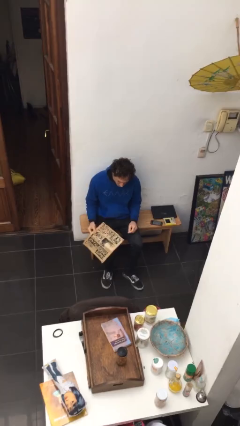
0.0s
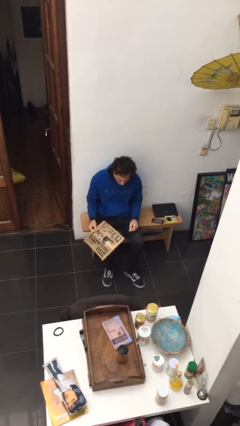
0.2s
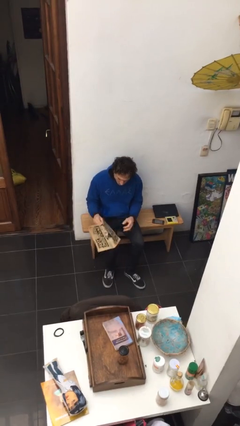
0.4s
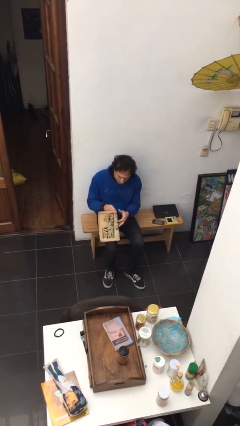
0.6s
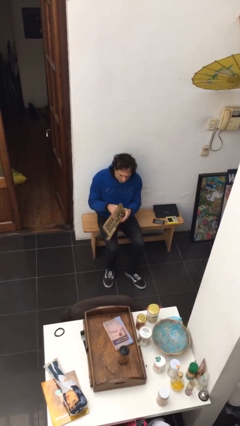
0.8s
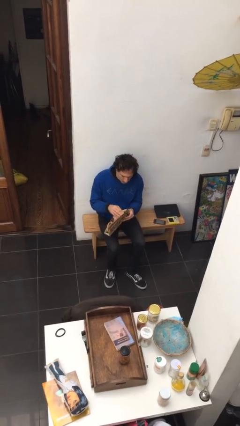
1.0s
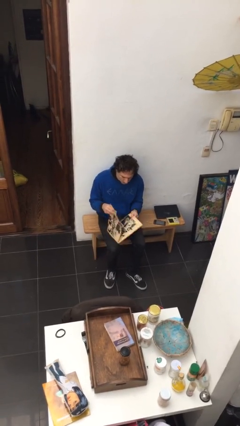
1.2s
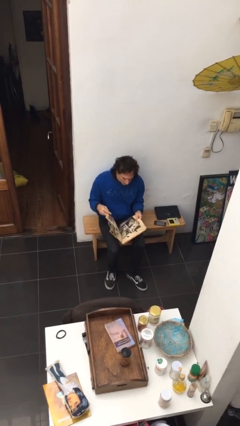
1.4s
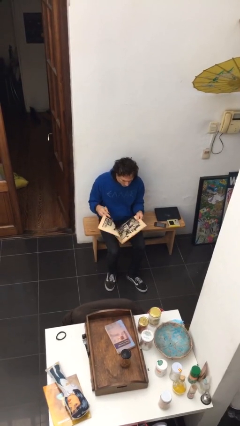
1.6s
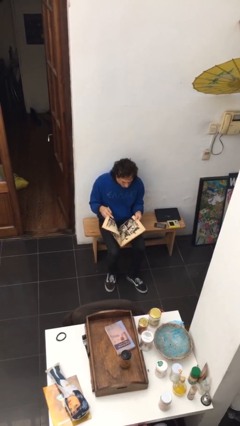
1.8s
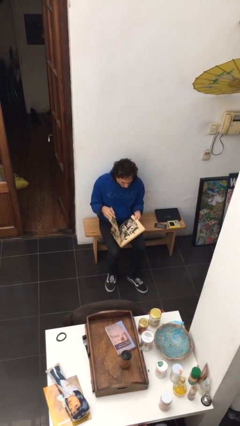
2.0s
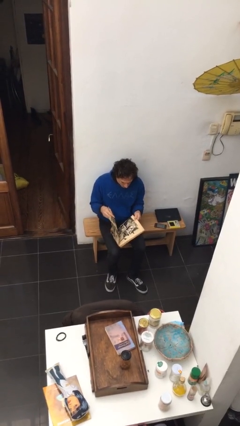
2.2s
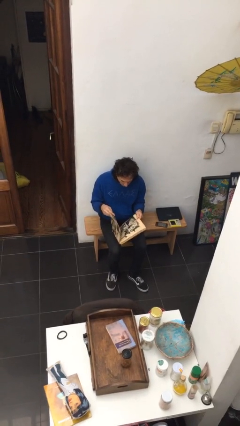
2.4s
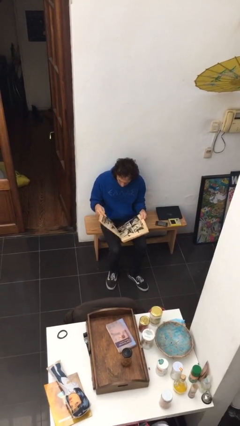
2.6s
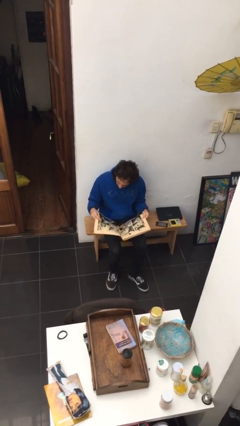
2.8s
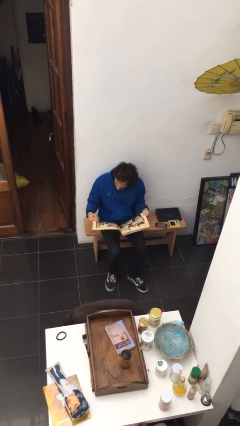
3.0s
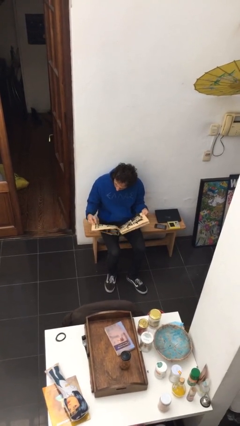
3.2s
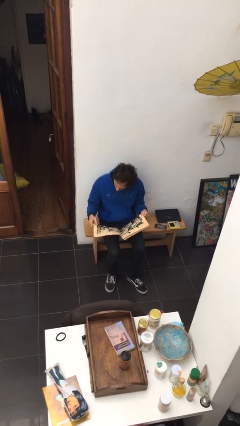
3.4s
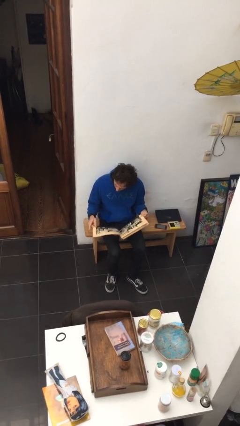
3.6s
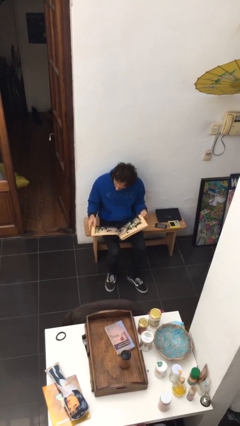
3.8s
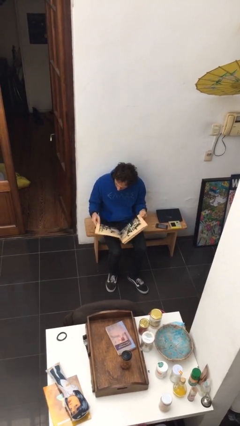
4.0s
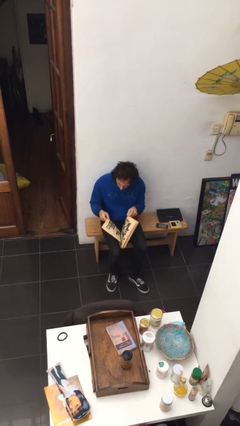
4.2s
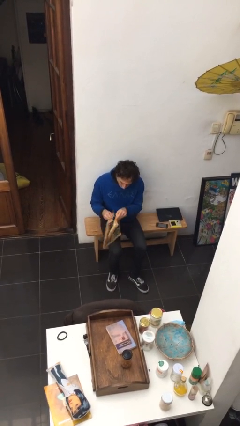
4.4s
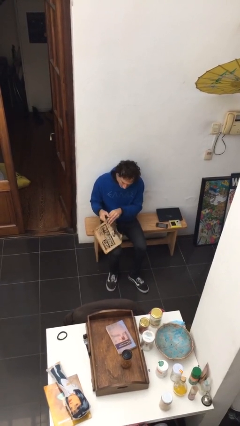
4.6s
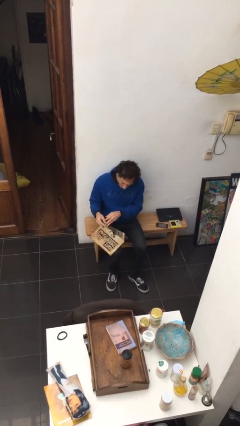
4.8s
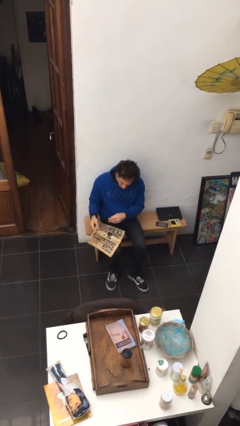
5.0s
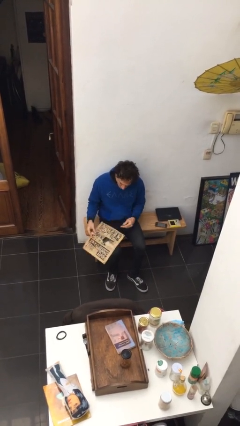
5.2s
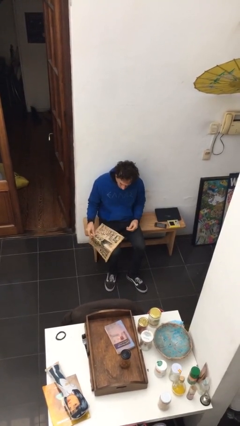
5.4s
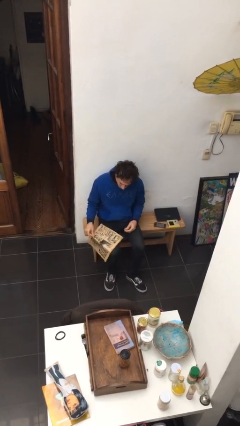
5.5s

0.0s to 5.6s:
person reads newspaper

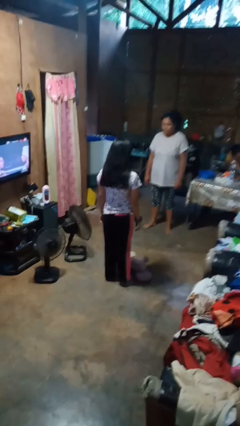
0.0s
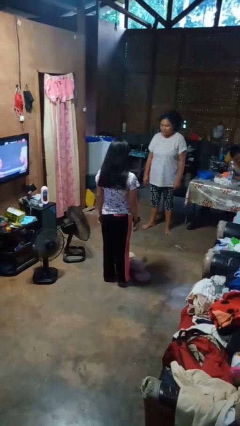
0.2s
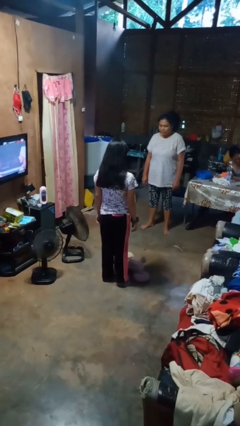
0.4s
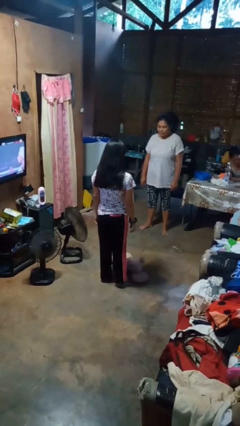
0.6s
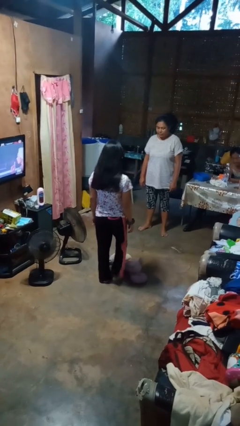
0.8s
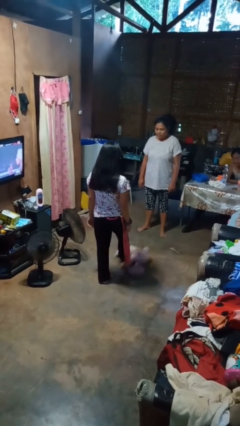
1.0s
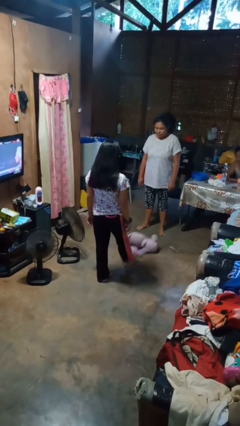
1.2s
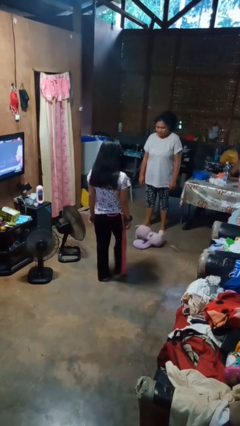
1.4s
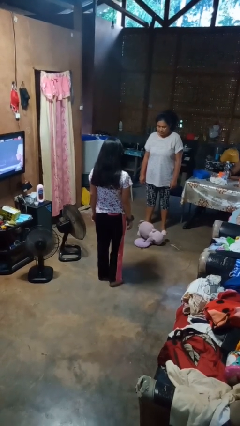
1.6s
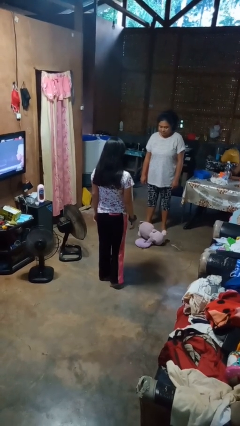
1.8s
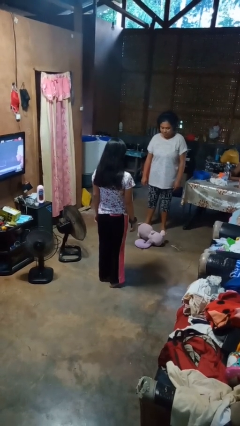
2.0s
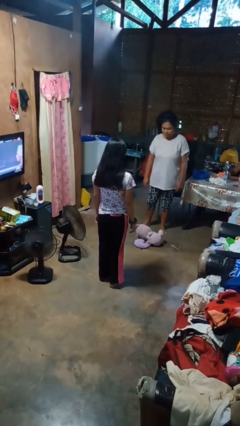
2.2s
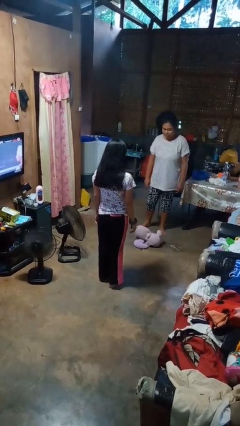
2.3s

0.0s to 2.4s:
person kicks object to person

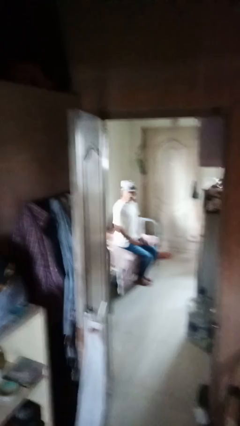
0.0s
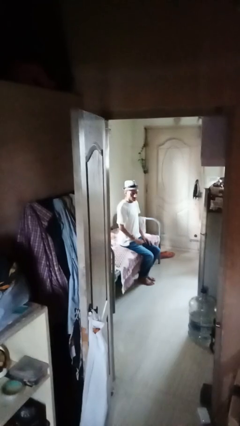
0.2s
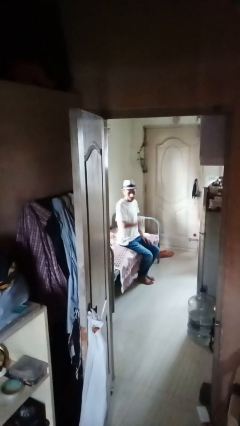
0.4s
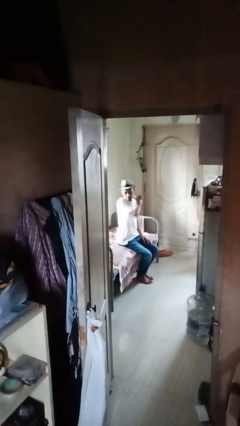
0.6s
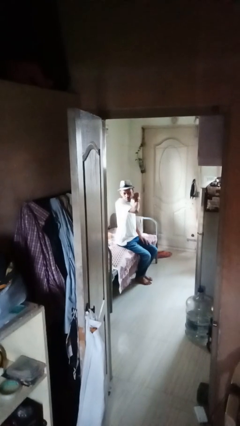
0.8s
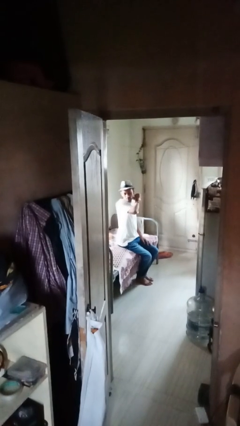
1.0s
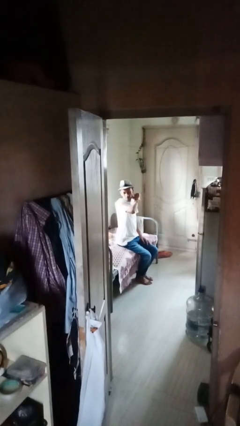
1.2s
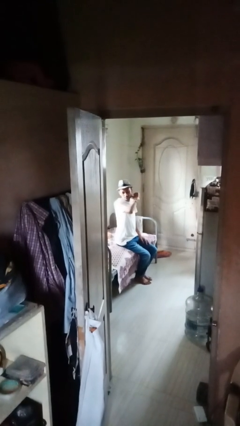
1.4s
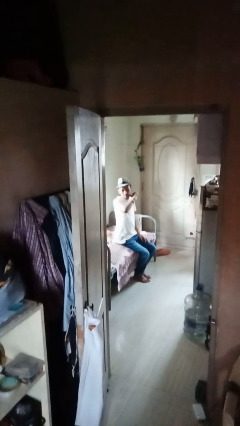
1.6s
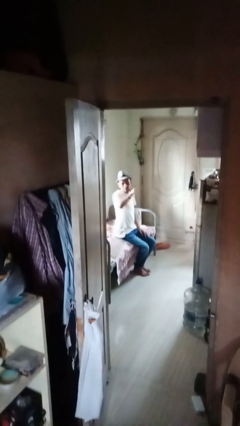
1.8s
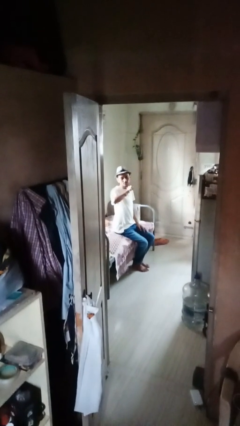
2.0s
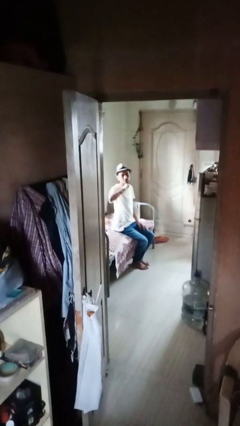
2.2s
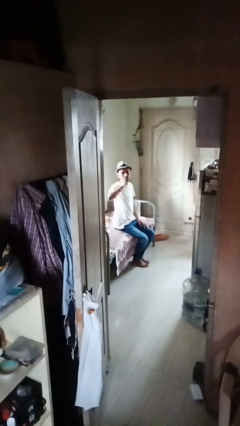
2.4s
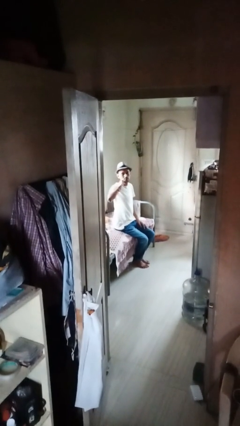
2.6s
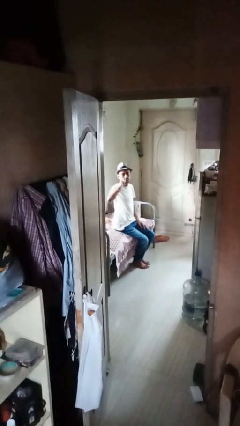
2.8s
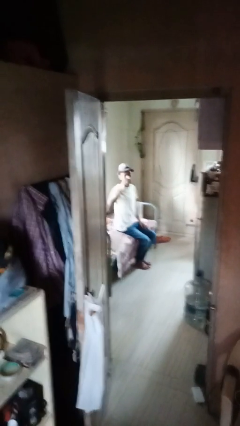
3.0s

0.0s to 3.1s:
person gestures cut

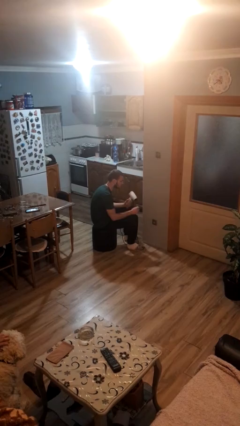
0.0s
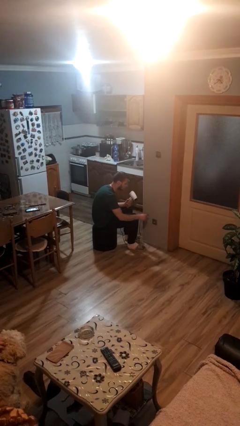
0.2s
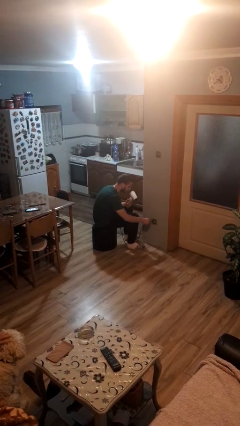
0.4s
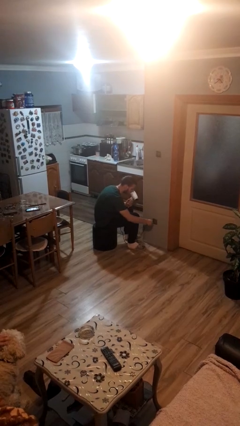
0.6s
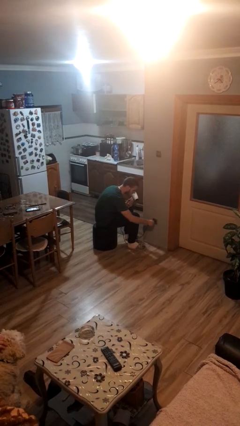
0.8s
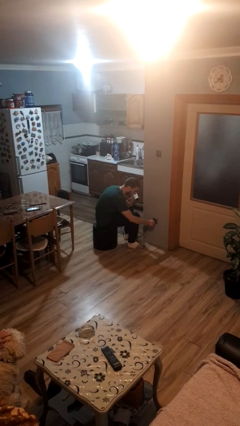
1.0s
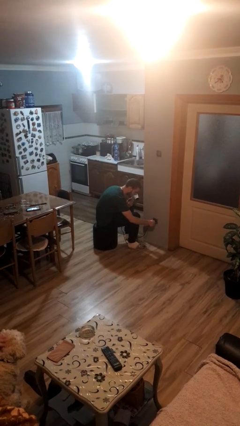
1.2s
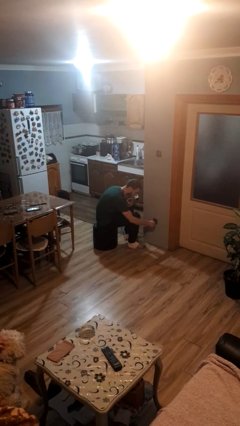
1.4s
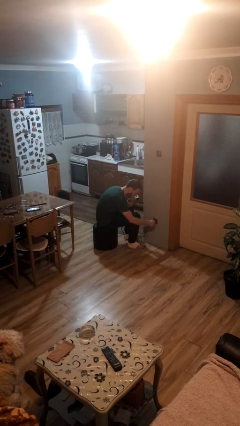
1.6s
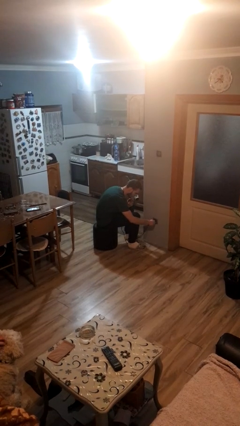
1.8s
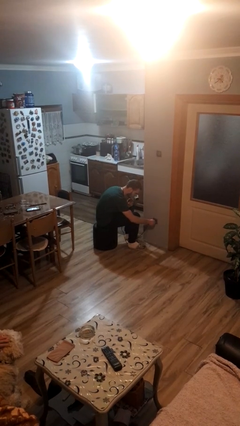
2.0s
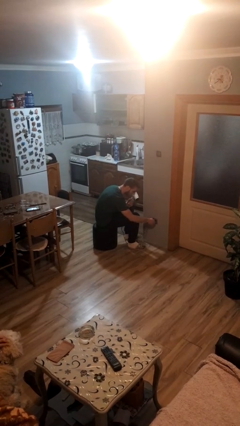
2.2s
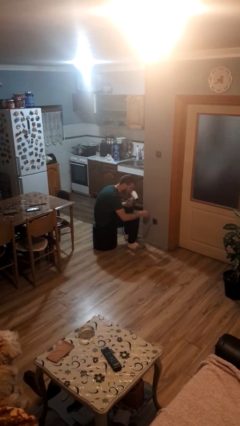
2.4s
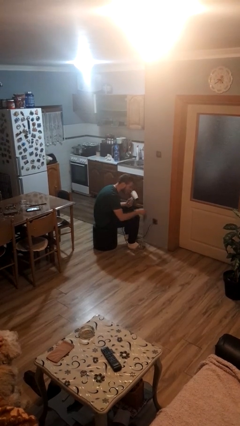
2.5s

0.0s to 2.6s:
person plugs into electrical socket

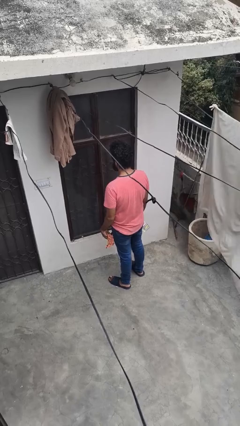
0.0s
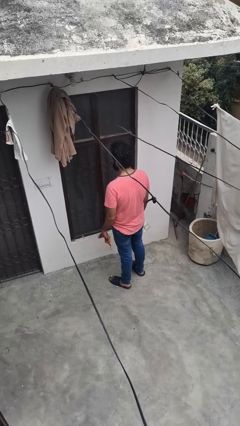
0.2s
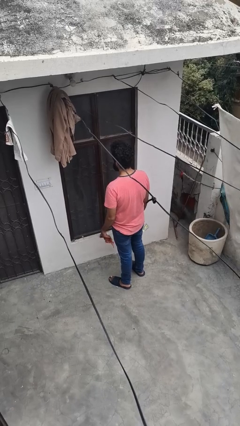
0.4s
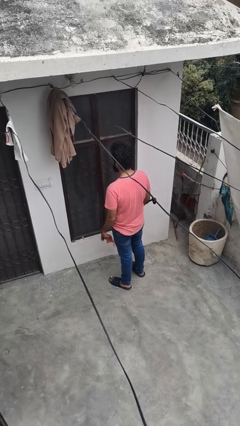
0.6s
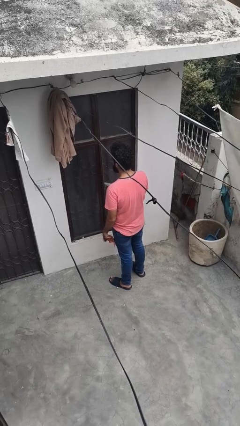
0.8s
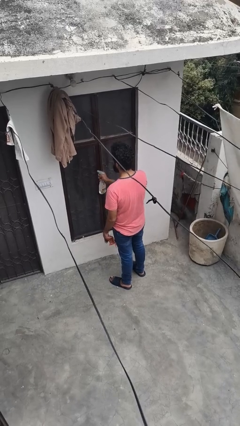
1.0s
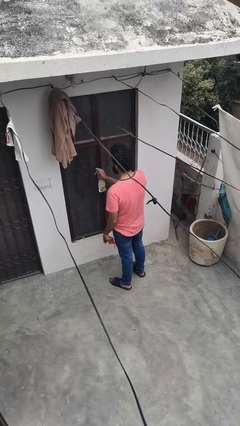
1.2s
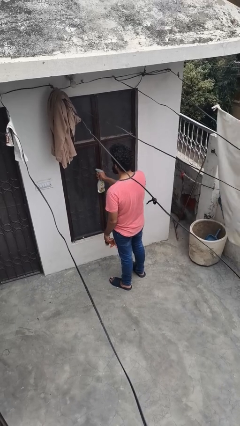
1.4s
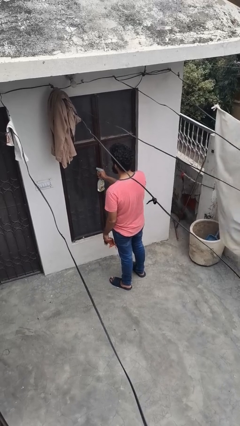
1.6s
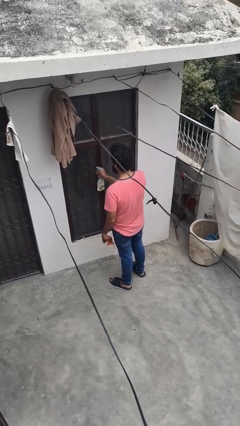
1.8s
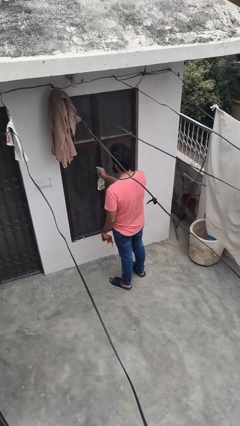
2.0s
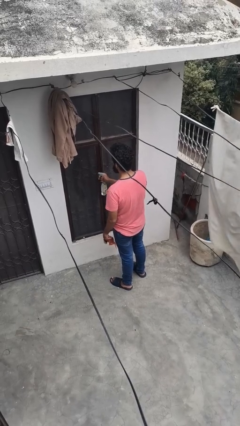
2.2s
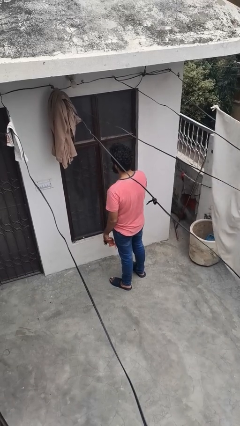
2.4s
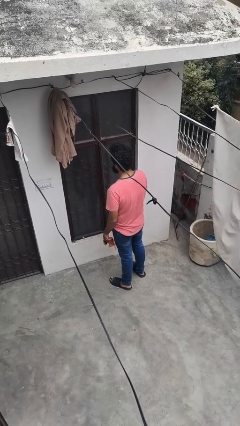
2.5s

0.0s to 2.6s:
person sprays from bottle

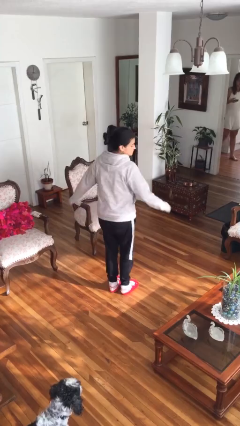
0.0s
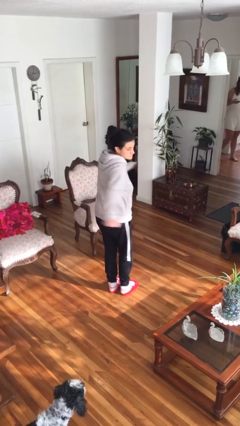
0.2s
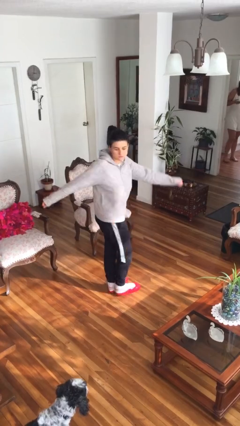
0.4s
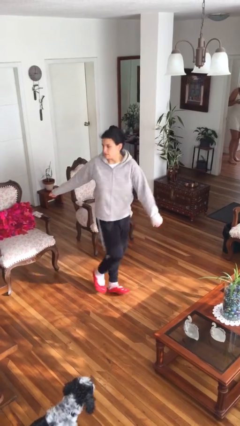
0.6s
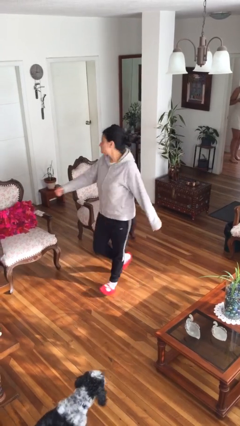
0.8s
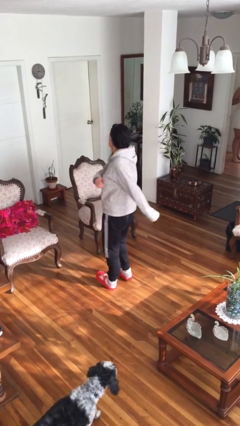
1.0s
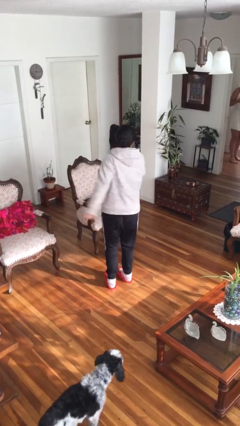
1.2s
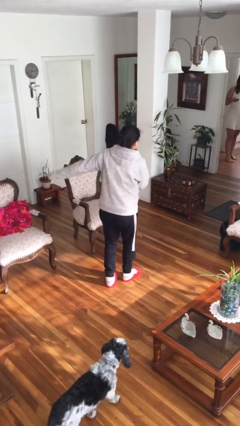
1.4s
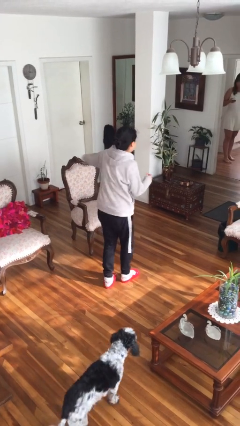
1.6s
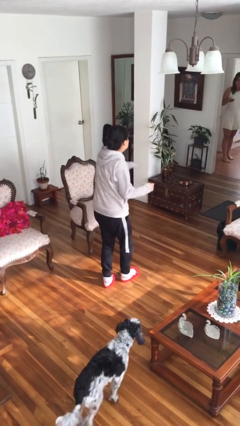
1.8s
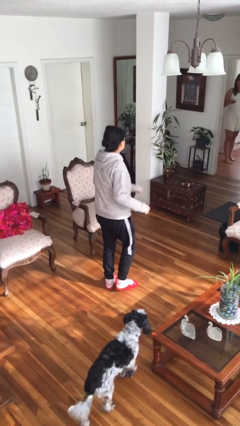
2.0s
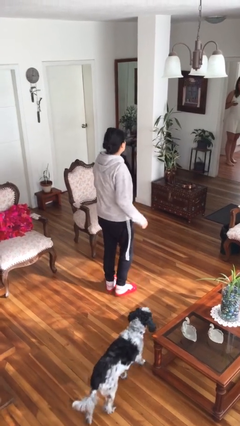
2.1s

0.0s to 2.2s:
person twirls
